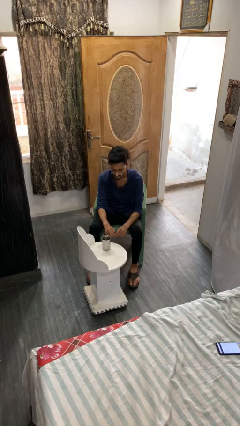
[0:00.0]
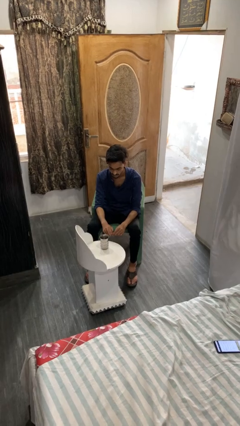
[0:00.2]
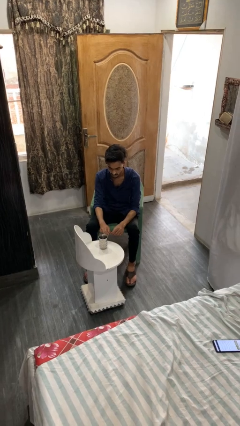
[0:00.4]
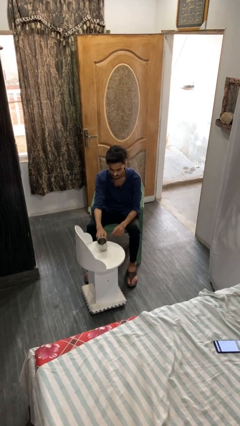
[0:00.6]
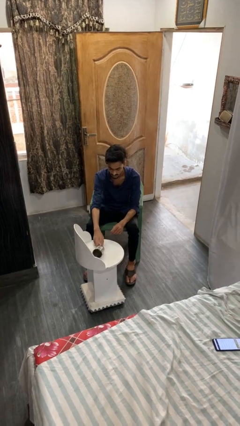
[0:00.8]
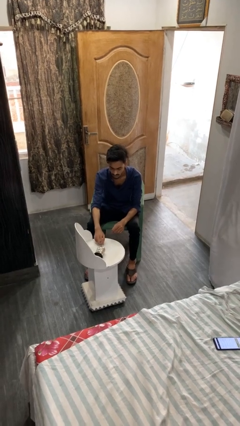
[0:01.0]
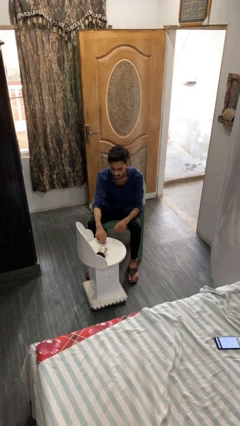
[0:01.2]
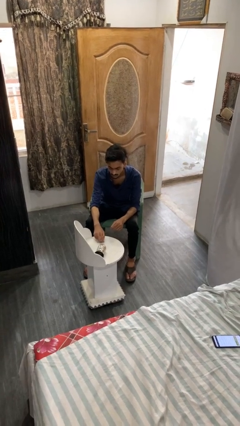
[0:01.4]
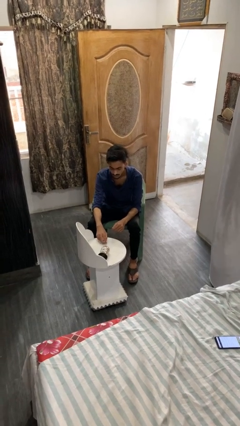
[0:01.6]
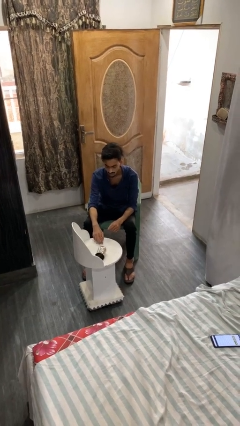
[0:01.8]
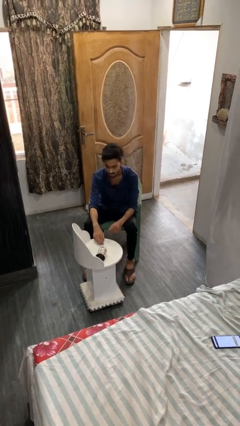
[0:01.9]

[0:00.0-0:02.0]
person knocks over glass

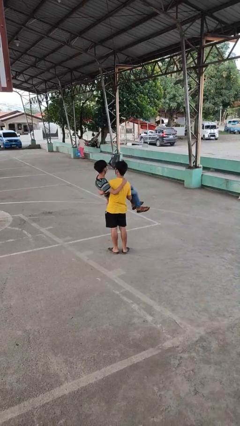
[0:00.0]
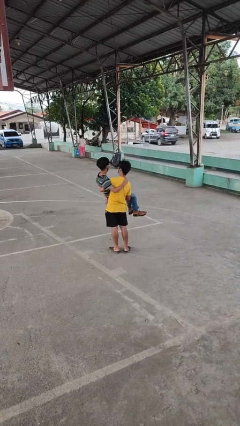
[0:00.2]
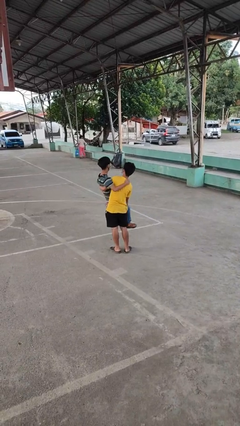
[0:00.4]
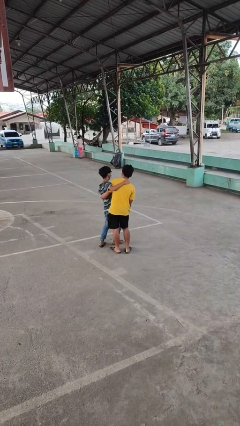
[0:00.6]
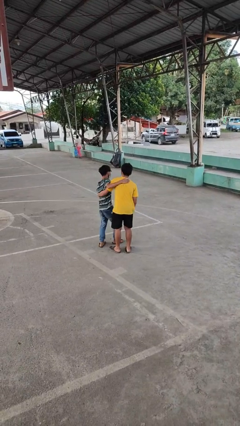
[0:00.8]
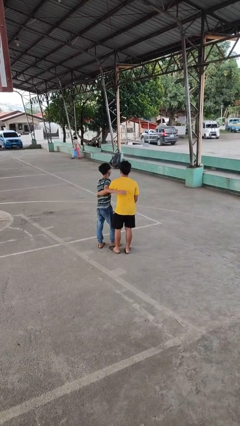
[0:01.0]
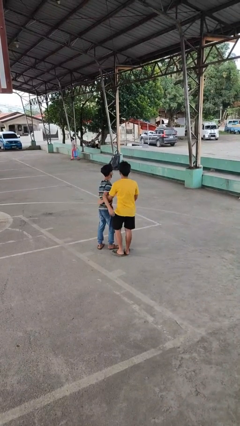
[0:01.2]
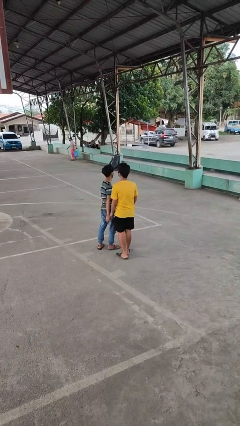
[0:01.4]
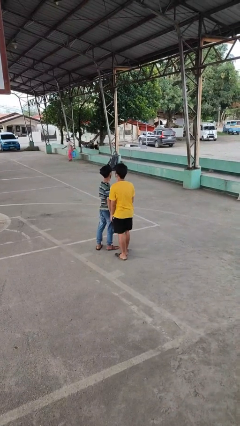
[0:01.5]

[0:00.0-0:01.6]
person puts down person

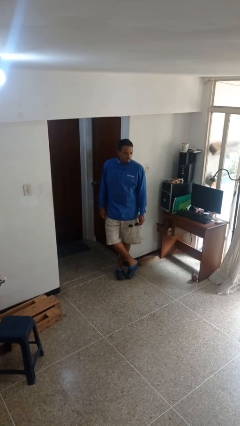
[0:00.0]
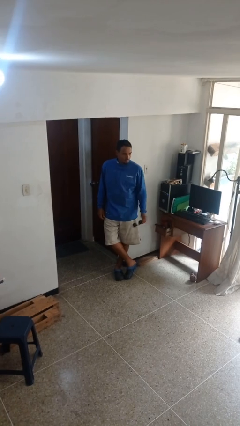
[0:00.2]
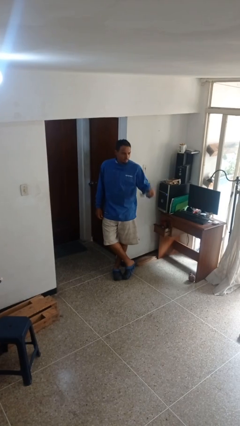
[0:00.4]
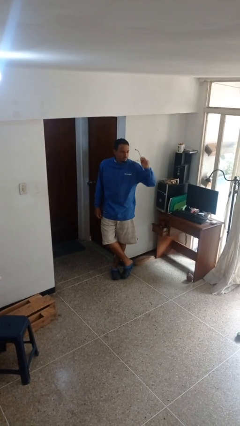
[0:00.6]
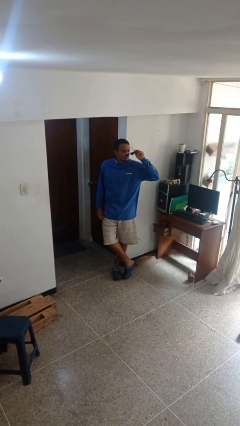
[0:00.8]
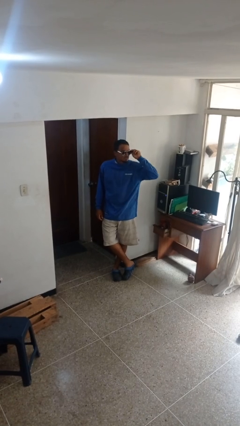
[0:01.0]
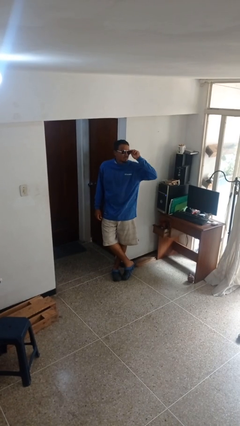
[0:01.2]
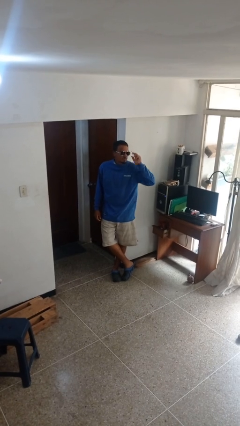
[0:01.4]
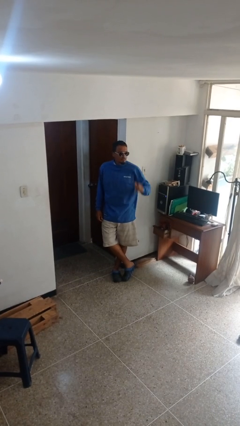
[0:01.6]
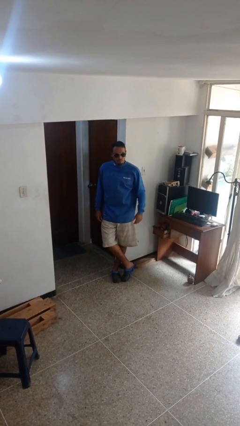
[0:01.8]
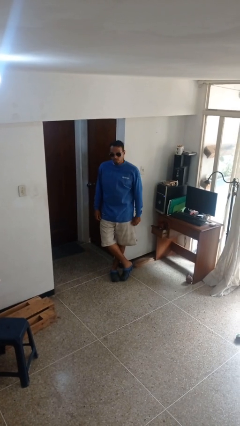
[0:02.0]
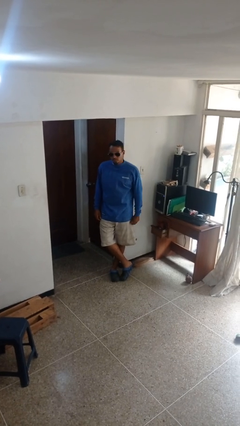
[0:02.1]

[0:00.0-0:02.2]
person puts on sunglasses

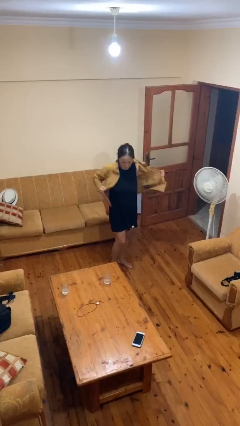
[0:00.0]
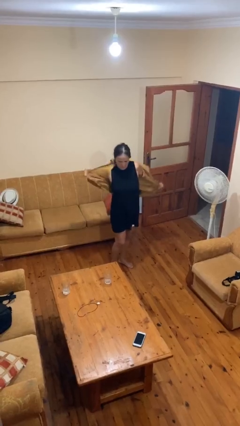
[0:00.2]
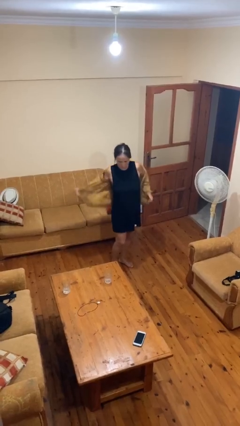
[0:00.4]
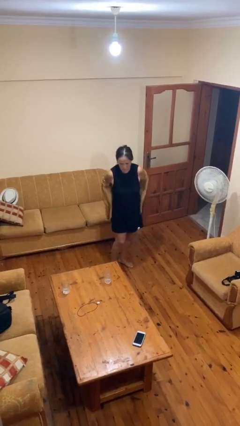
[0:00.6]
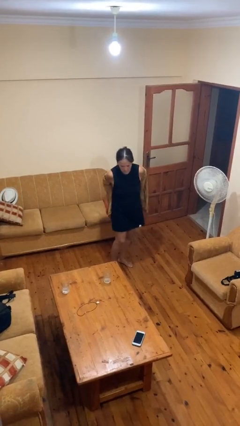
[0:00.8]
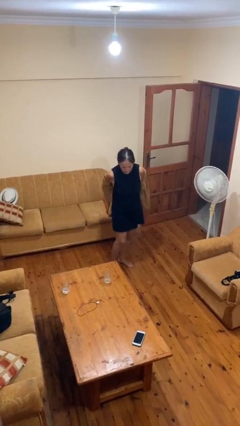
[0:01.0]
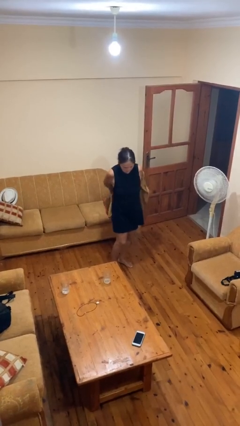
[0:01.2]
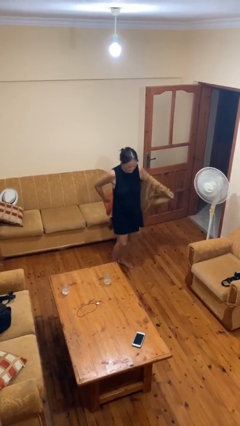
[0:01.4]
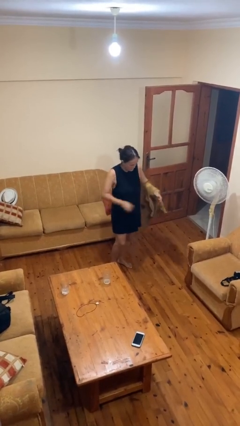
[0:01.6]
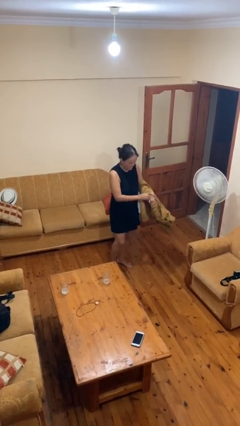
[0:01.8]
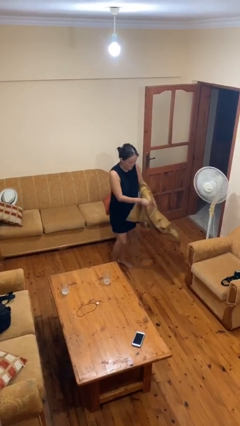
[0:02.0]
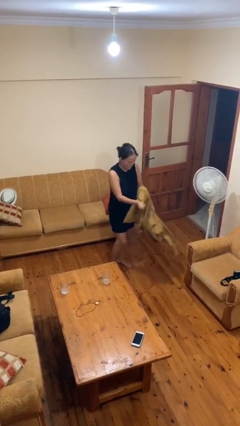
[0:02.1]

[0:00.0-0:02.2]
person takes off jacket

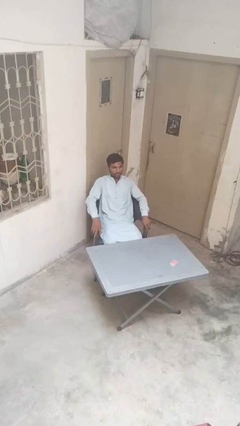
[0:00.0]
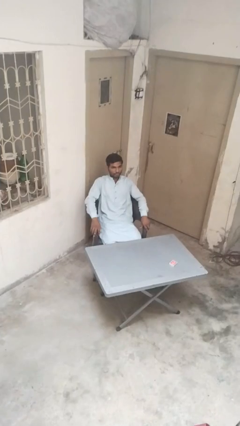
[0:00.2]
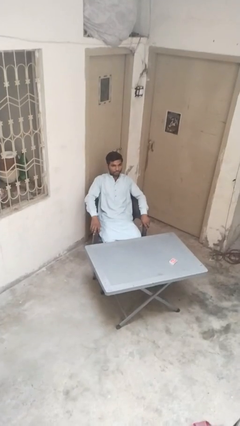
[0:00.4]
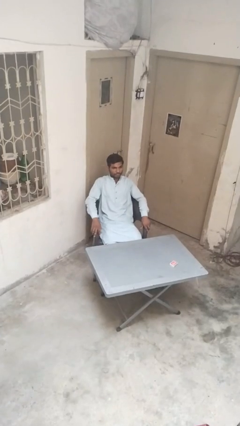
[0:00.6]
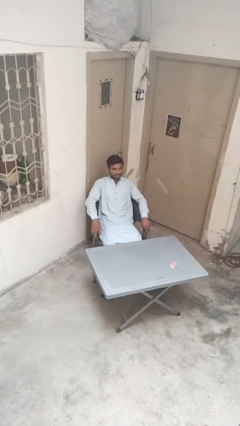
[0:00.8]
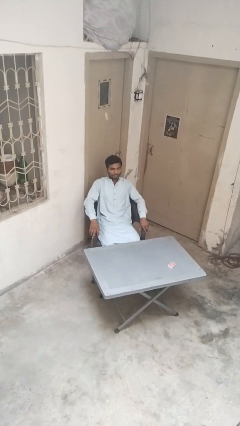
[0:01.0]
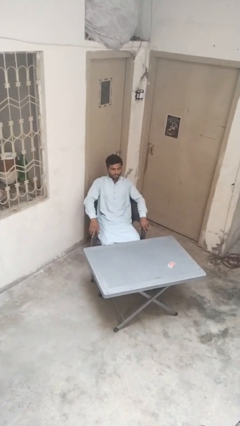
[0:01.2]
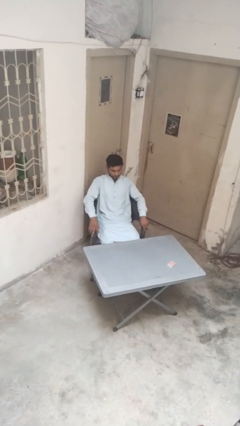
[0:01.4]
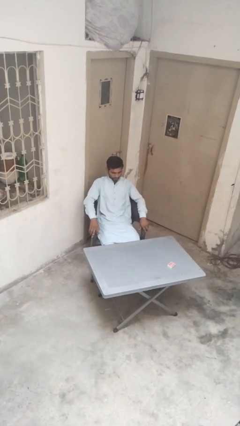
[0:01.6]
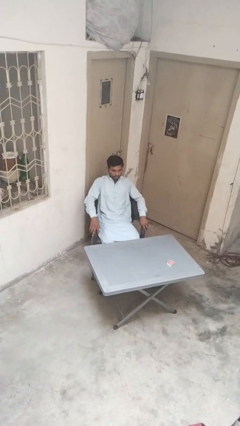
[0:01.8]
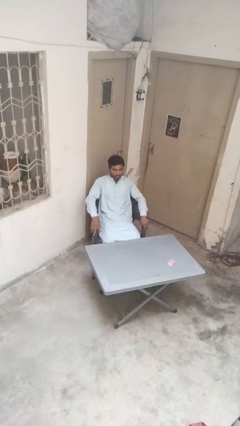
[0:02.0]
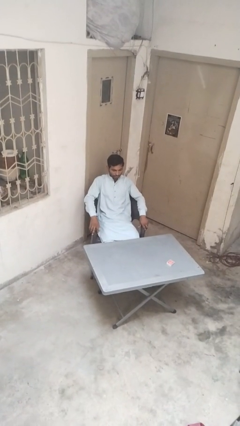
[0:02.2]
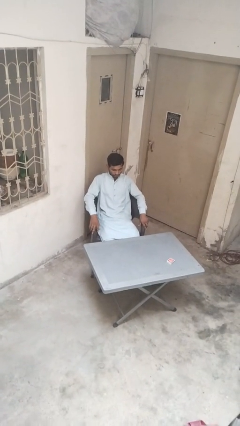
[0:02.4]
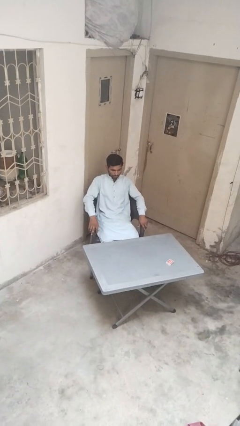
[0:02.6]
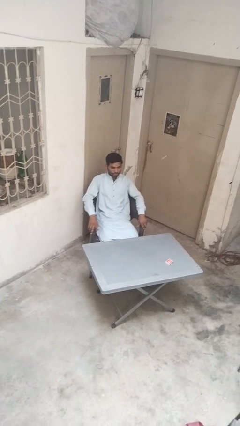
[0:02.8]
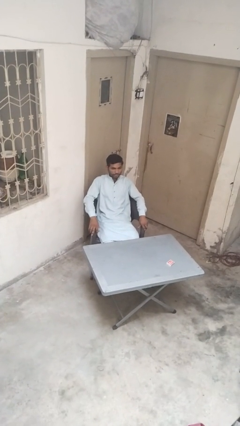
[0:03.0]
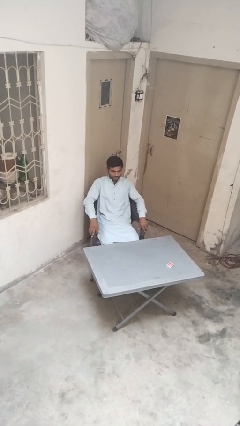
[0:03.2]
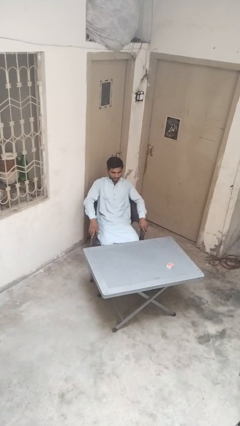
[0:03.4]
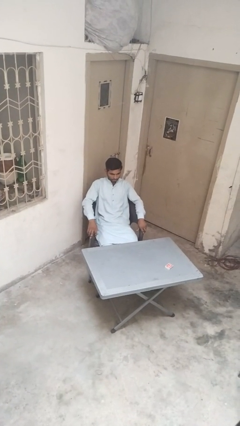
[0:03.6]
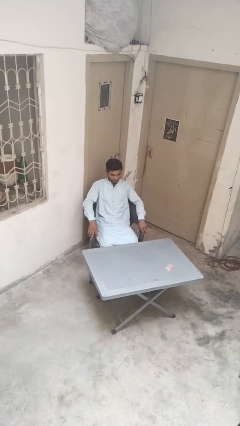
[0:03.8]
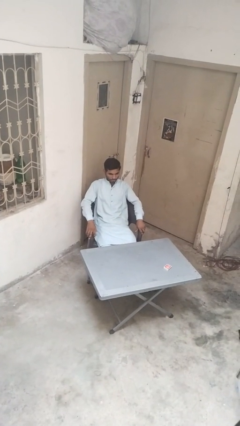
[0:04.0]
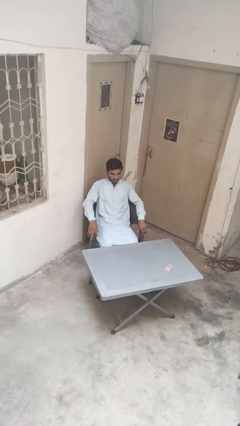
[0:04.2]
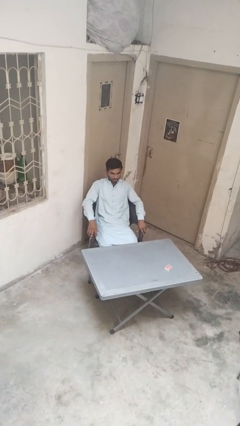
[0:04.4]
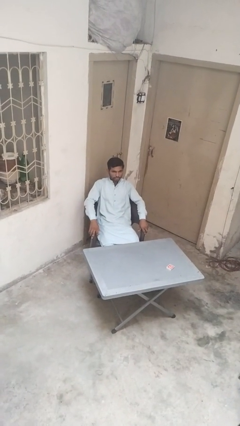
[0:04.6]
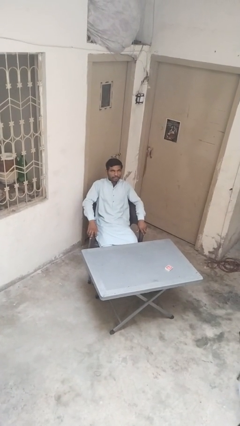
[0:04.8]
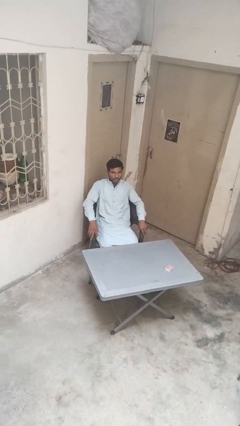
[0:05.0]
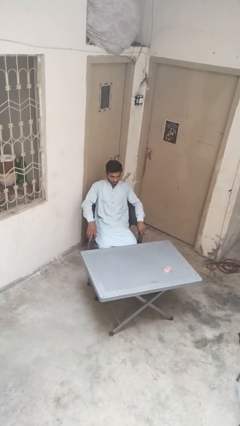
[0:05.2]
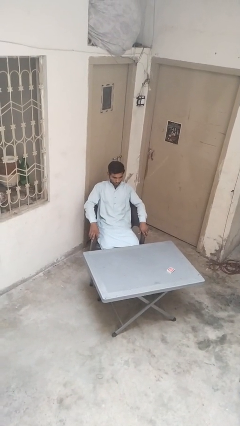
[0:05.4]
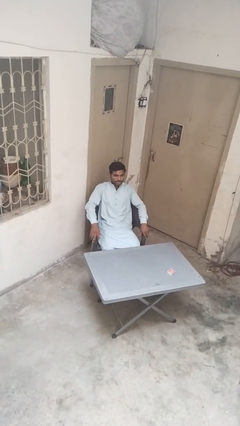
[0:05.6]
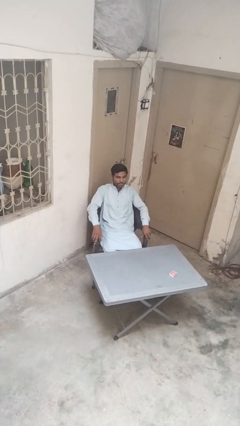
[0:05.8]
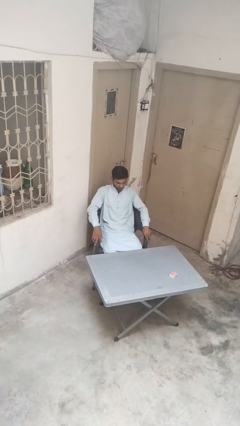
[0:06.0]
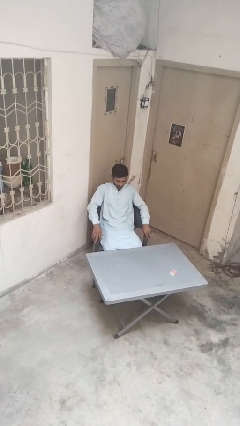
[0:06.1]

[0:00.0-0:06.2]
person nods head

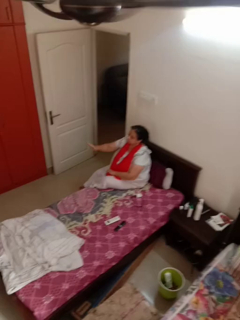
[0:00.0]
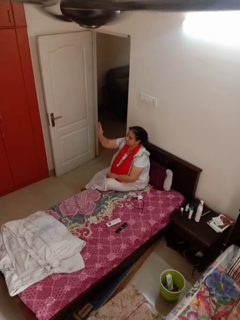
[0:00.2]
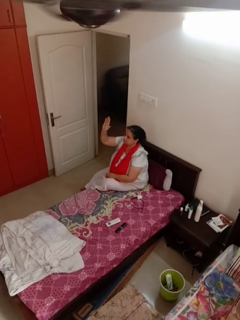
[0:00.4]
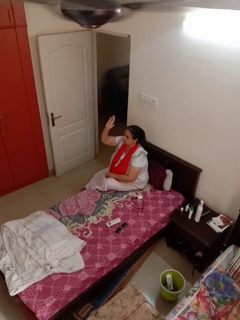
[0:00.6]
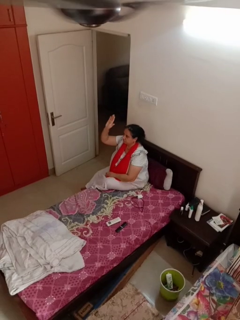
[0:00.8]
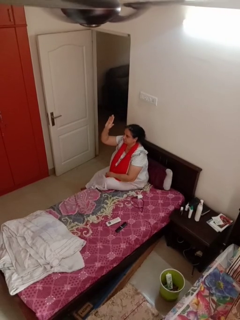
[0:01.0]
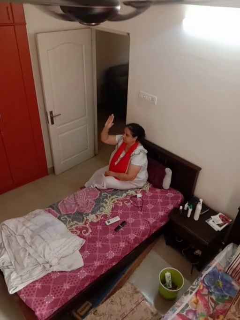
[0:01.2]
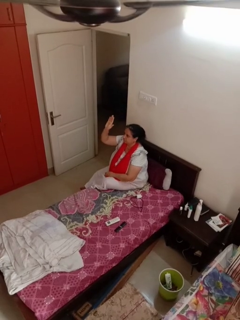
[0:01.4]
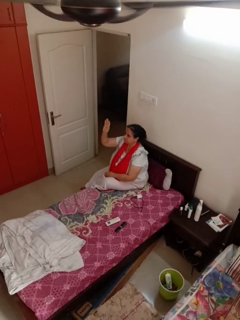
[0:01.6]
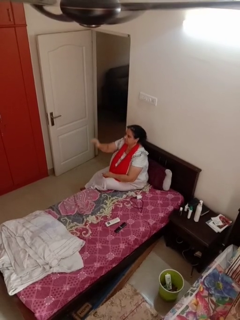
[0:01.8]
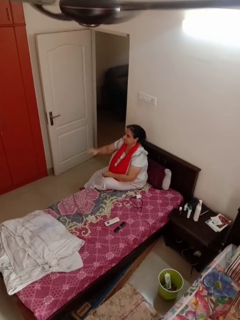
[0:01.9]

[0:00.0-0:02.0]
person gestures raise hand

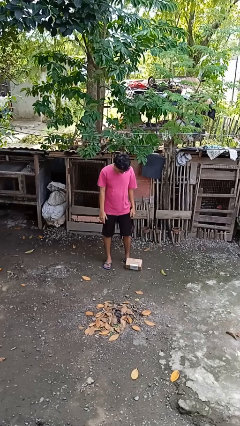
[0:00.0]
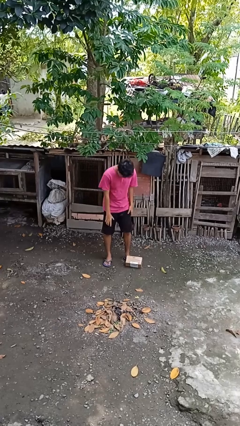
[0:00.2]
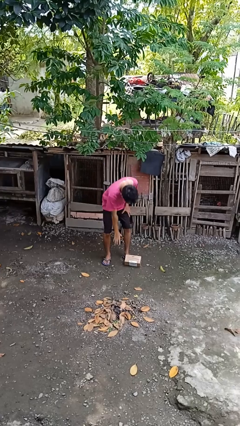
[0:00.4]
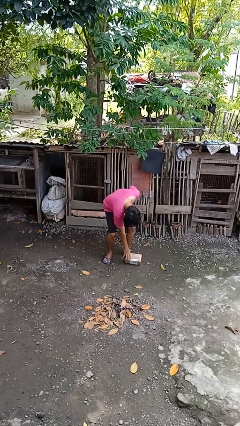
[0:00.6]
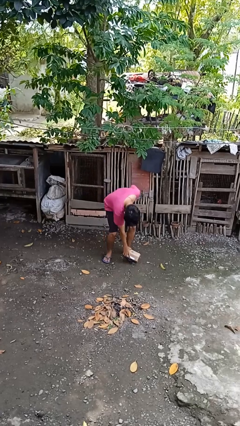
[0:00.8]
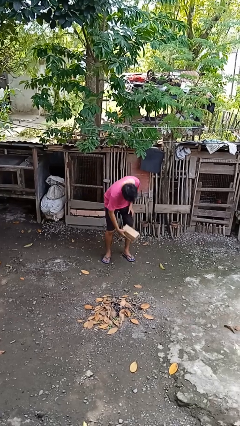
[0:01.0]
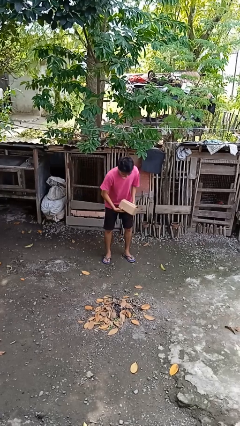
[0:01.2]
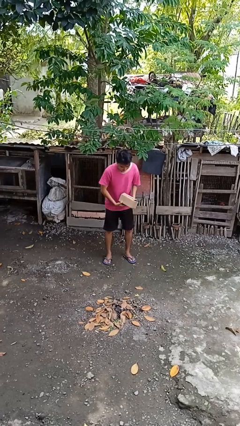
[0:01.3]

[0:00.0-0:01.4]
person picks up object from floor

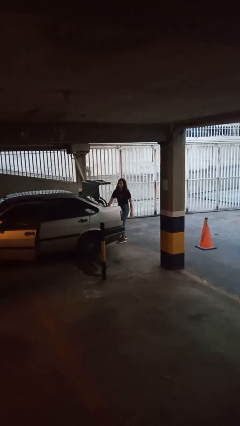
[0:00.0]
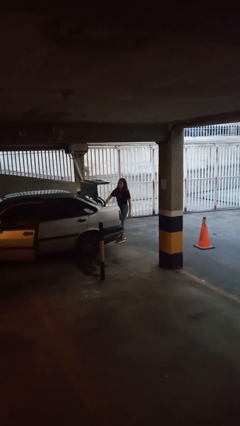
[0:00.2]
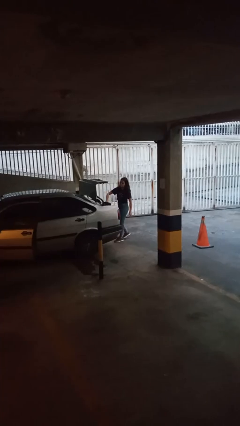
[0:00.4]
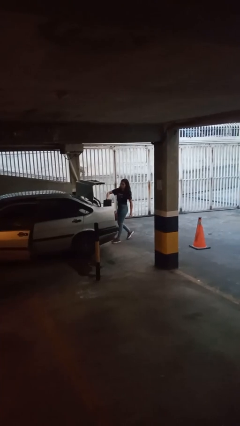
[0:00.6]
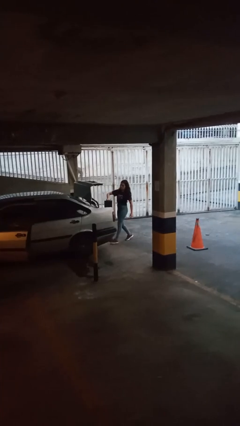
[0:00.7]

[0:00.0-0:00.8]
person unloads car
